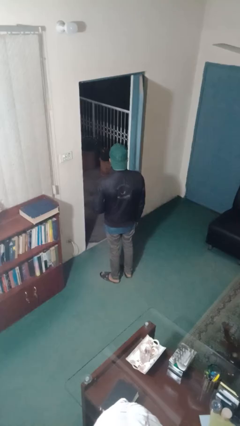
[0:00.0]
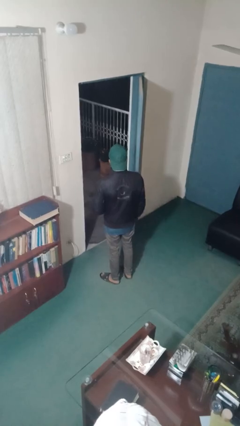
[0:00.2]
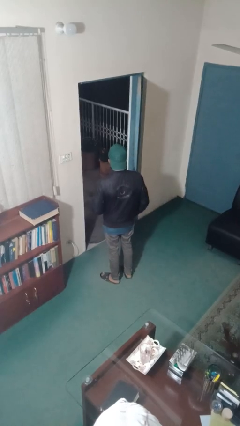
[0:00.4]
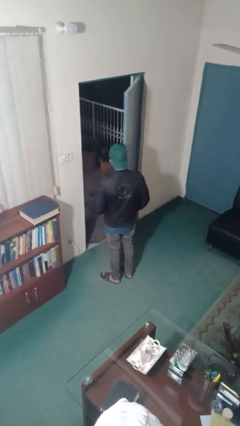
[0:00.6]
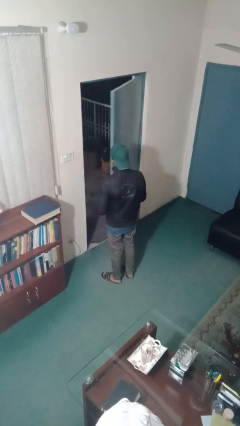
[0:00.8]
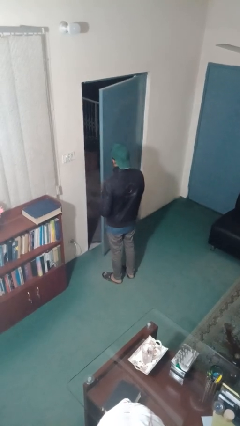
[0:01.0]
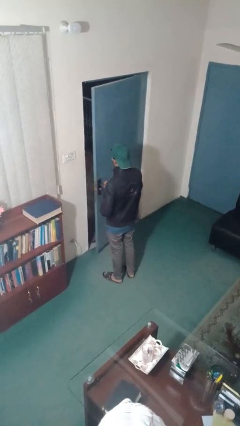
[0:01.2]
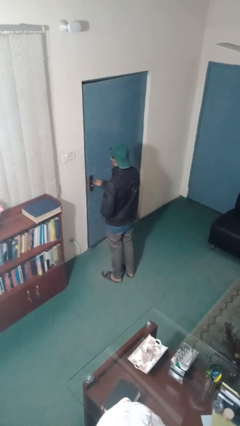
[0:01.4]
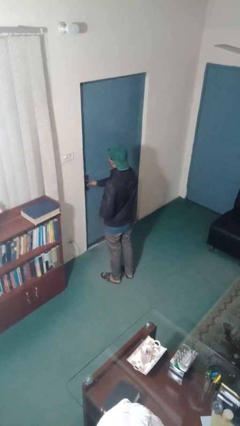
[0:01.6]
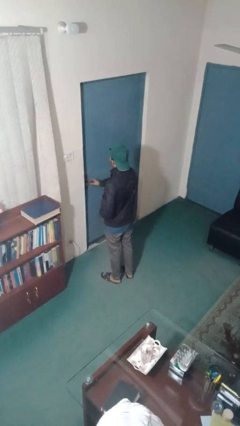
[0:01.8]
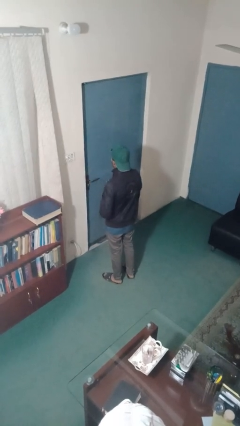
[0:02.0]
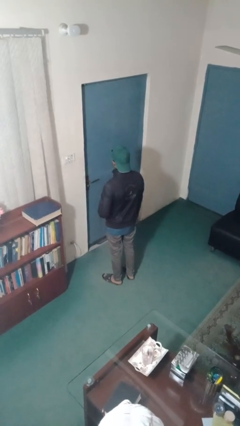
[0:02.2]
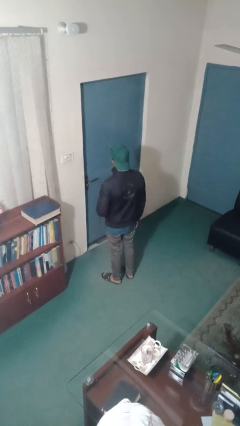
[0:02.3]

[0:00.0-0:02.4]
person closes facility door

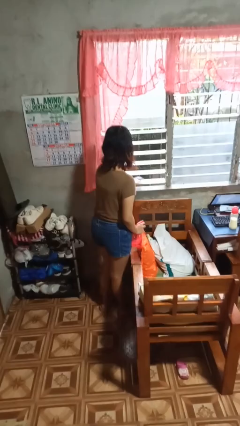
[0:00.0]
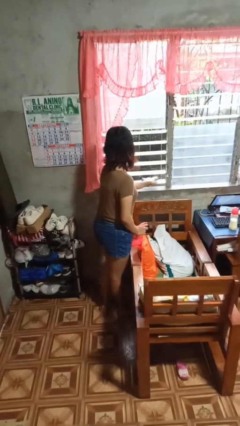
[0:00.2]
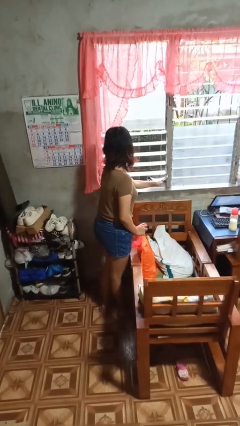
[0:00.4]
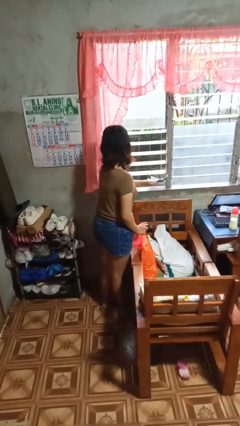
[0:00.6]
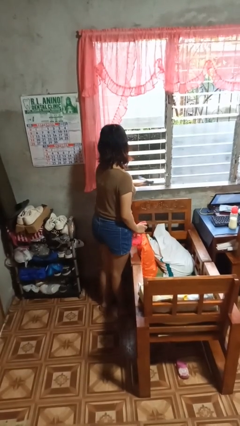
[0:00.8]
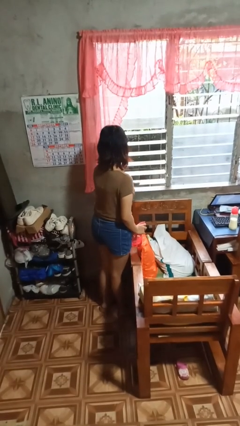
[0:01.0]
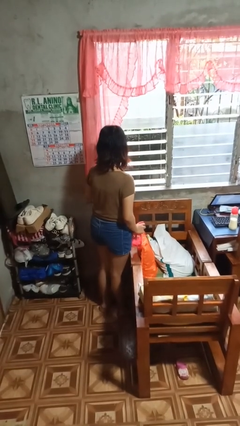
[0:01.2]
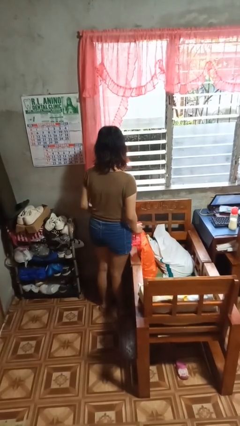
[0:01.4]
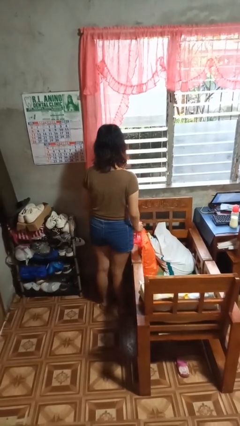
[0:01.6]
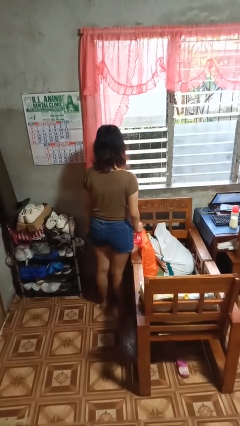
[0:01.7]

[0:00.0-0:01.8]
person washes window

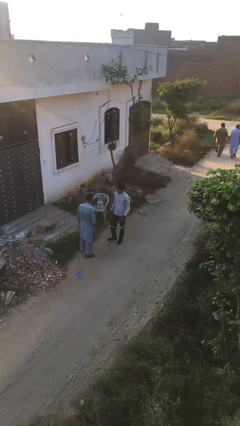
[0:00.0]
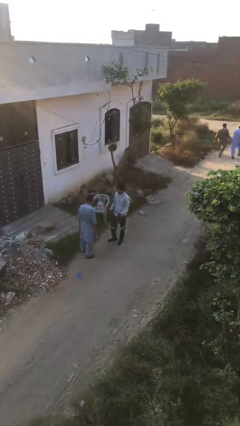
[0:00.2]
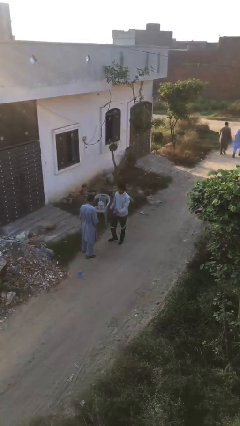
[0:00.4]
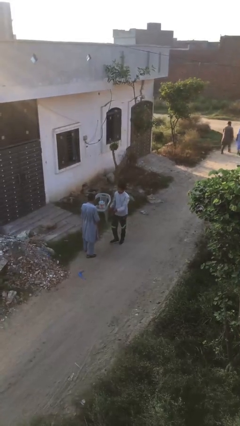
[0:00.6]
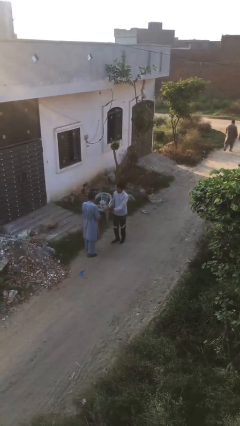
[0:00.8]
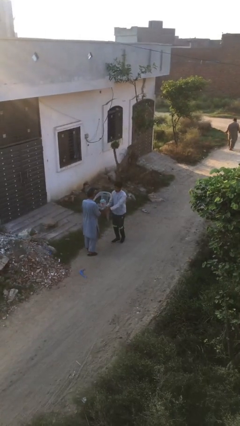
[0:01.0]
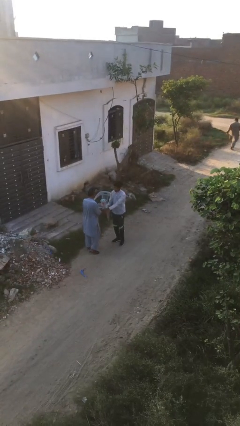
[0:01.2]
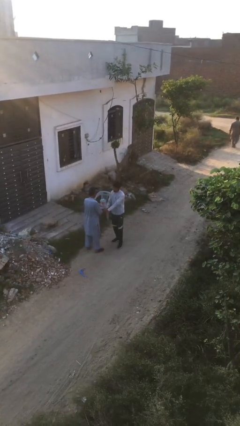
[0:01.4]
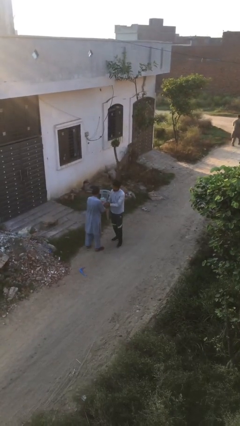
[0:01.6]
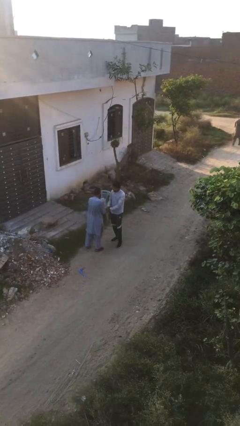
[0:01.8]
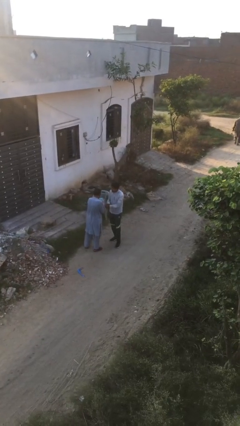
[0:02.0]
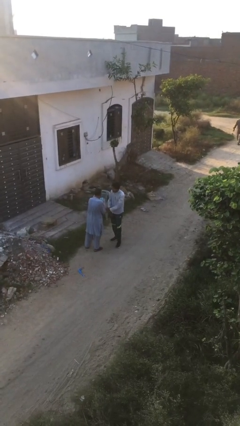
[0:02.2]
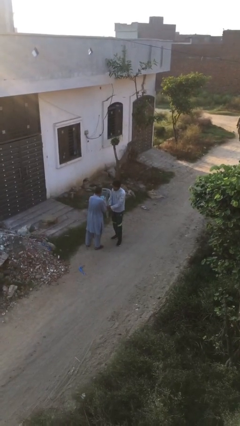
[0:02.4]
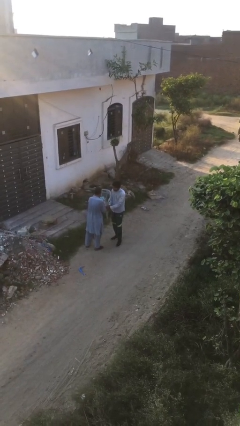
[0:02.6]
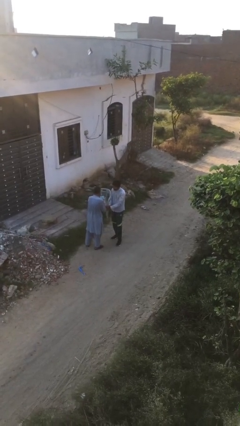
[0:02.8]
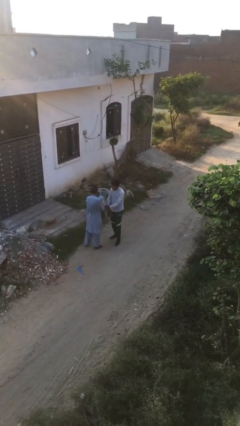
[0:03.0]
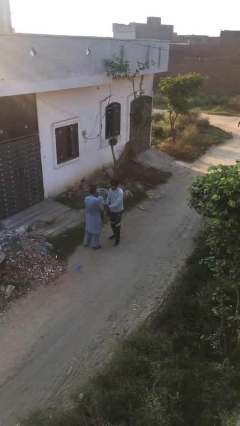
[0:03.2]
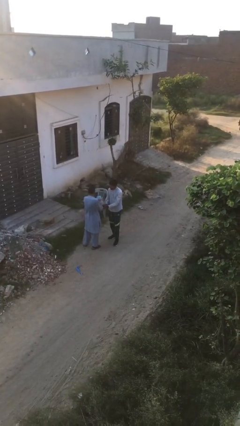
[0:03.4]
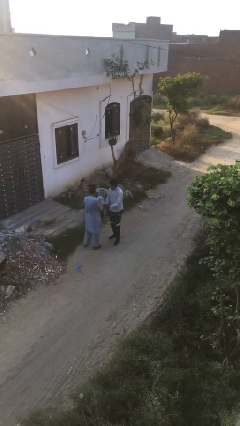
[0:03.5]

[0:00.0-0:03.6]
person shakes hand

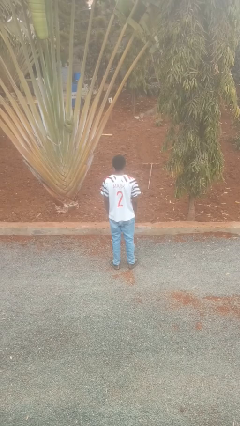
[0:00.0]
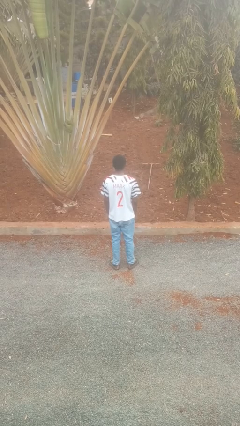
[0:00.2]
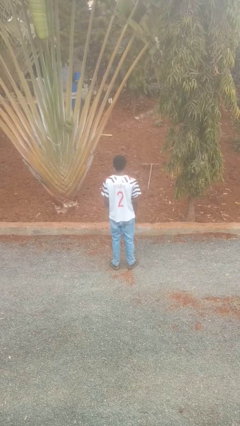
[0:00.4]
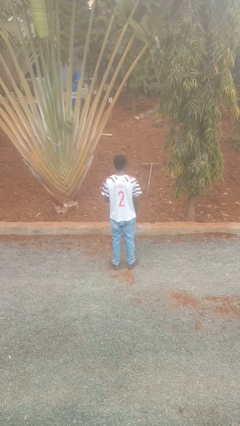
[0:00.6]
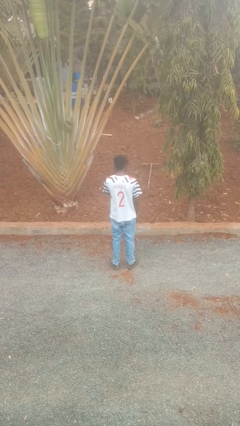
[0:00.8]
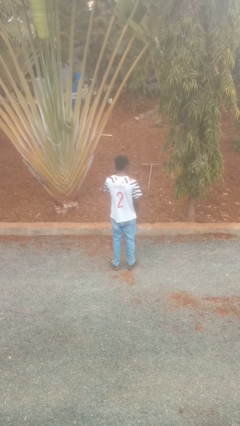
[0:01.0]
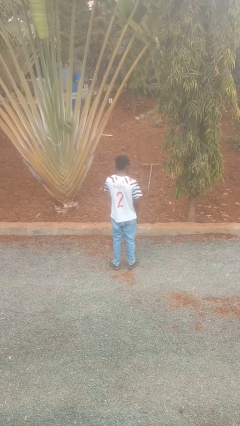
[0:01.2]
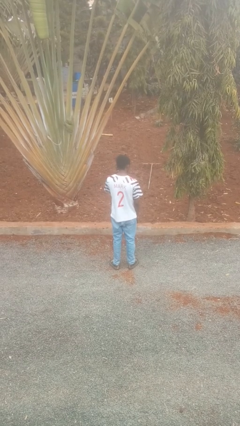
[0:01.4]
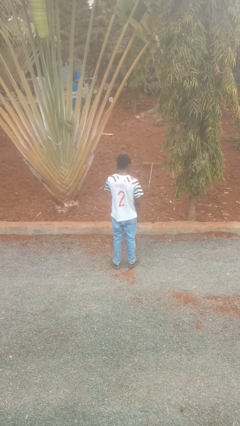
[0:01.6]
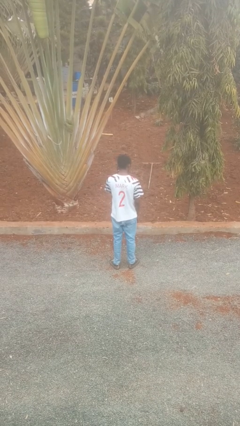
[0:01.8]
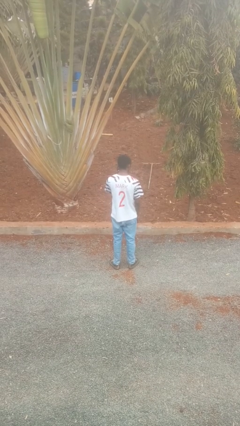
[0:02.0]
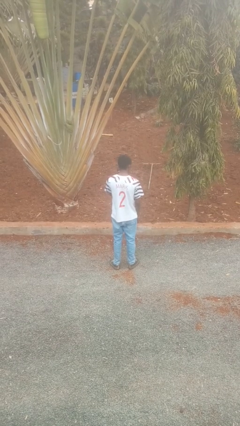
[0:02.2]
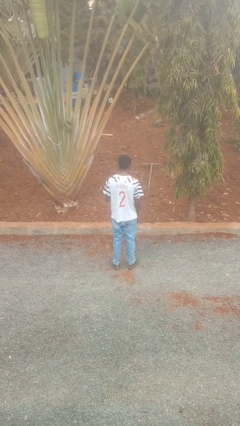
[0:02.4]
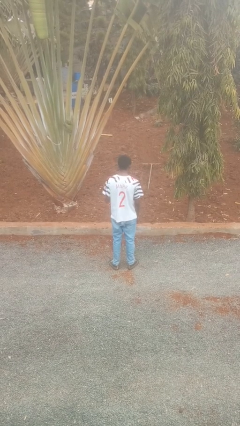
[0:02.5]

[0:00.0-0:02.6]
person gestures listen closely

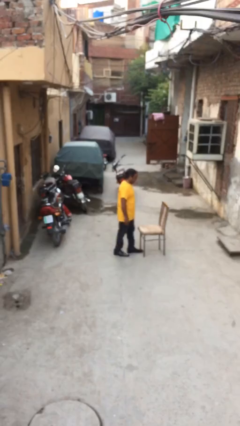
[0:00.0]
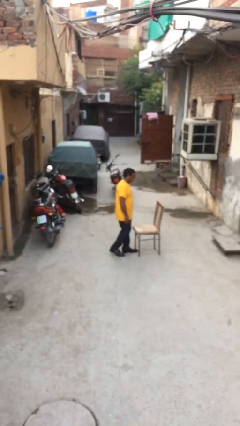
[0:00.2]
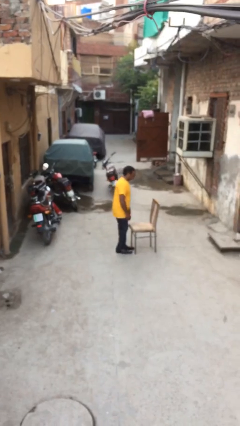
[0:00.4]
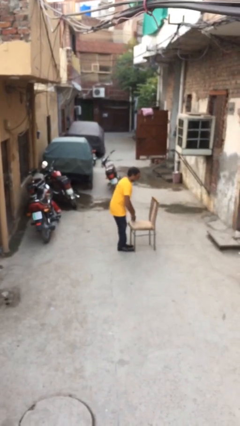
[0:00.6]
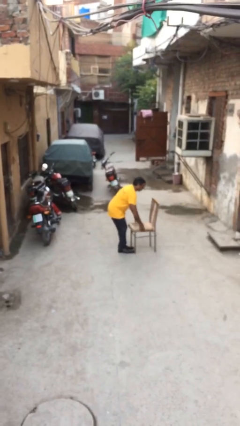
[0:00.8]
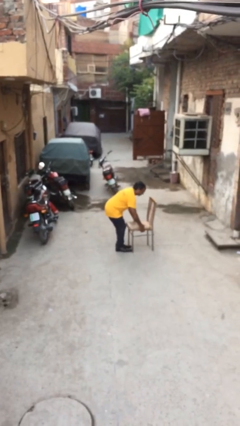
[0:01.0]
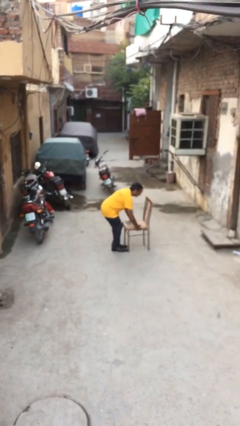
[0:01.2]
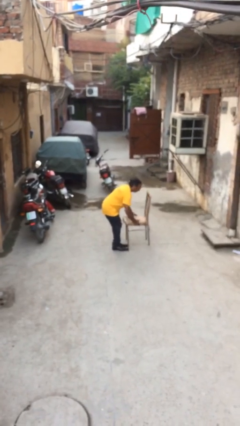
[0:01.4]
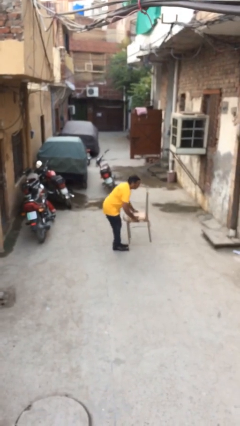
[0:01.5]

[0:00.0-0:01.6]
person picks up object from floor

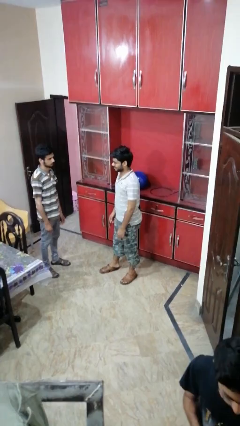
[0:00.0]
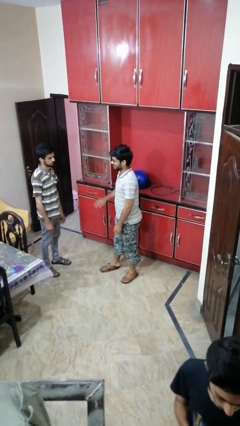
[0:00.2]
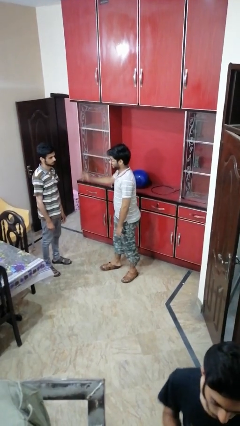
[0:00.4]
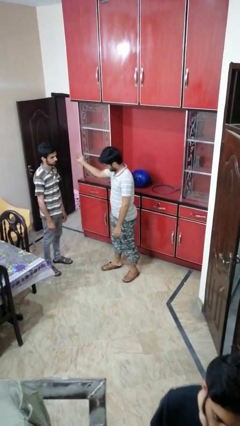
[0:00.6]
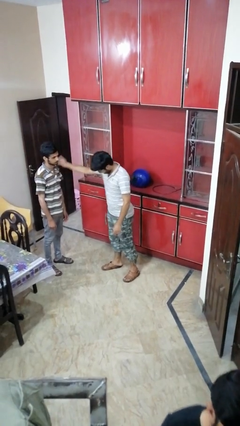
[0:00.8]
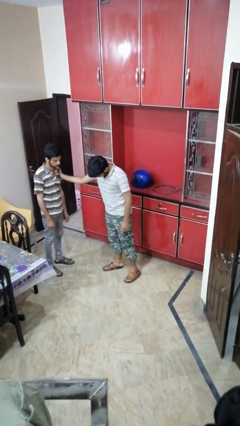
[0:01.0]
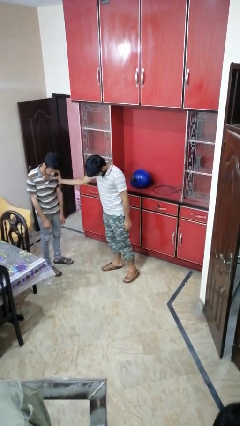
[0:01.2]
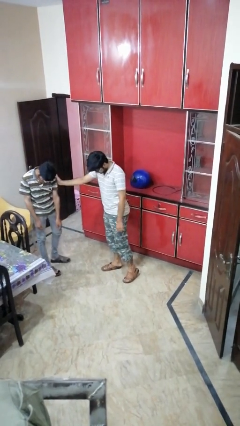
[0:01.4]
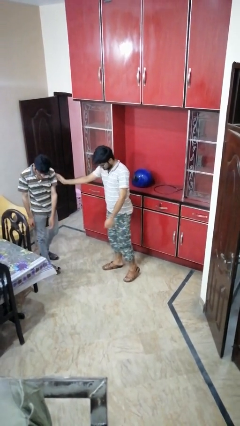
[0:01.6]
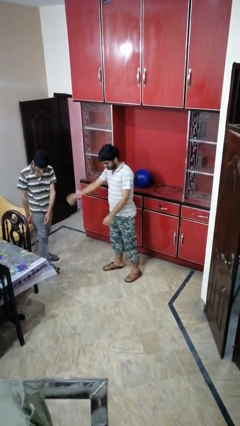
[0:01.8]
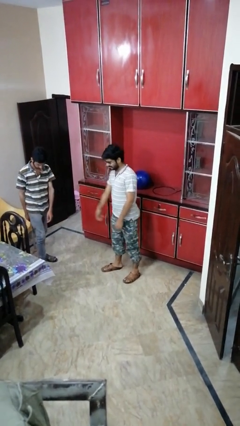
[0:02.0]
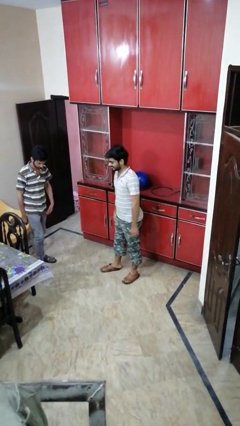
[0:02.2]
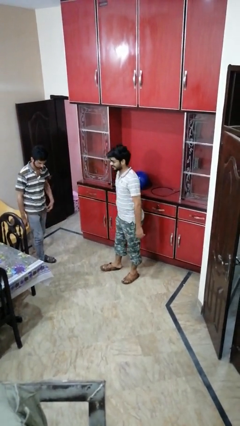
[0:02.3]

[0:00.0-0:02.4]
person shoves person

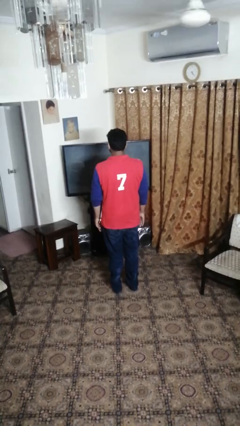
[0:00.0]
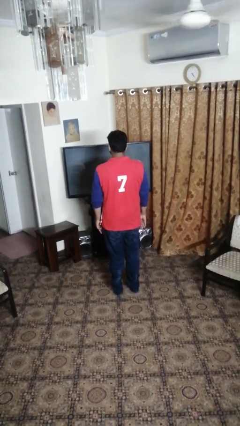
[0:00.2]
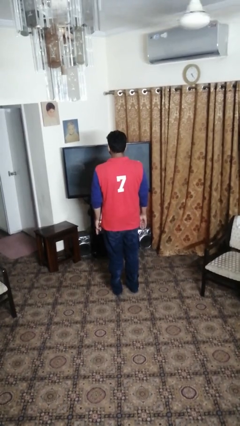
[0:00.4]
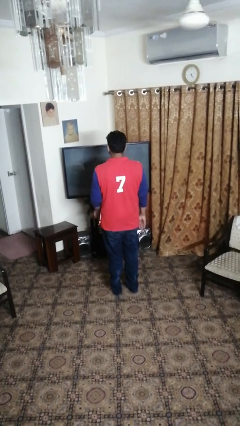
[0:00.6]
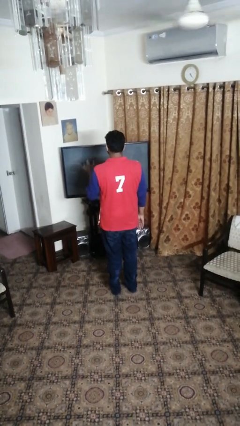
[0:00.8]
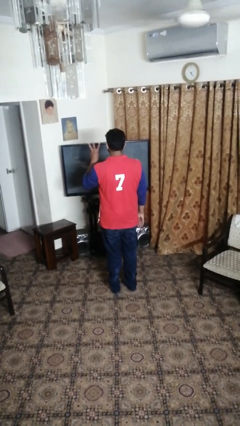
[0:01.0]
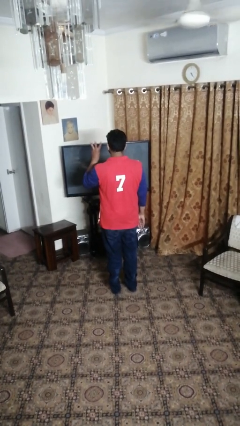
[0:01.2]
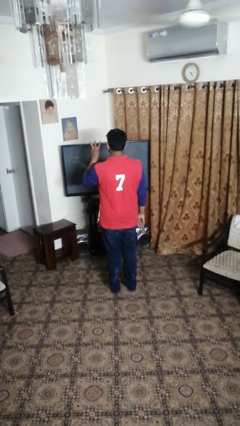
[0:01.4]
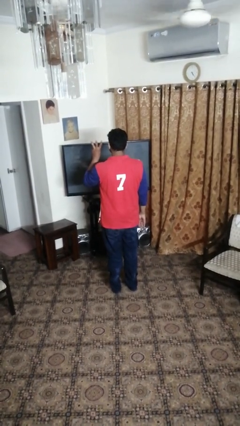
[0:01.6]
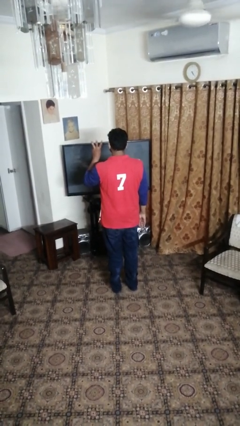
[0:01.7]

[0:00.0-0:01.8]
person gestures number three

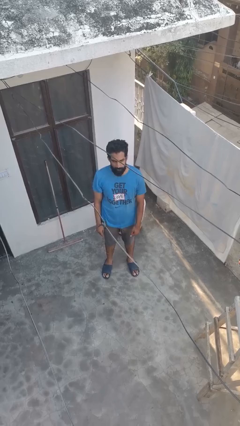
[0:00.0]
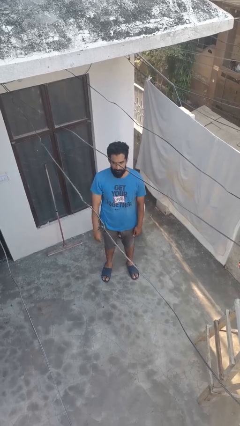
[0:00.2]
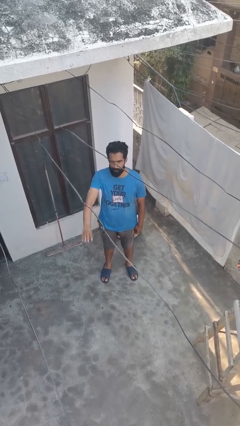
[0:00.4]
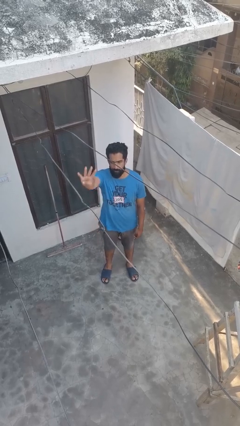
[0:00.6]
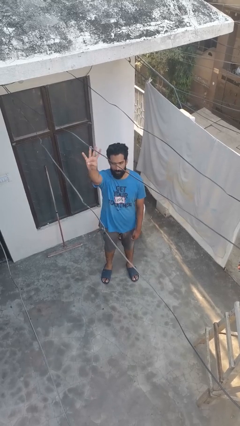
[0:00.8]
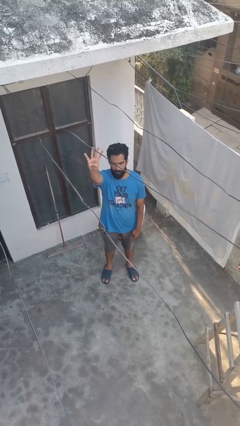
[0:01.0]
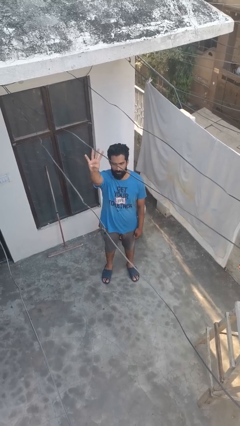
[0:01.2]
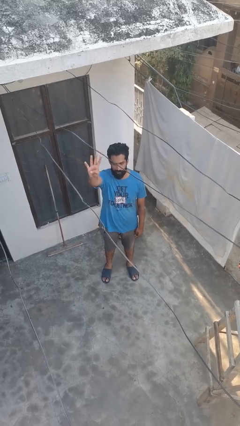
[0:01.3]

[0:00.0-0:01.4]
person gestures number four
